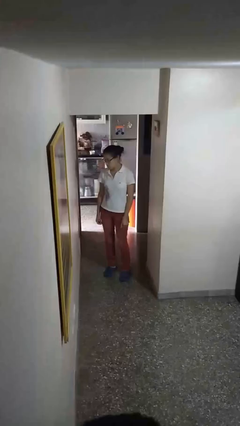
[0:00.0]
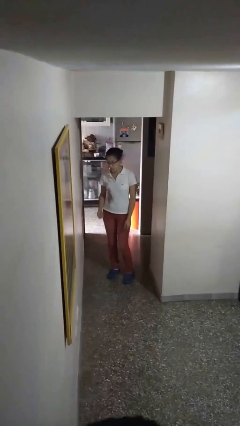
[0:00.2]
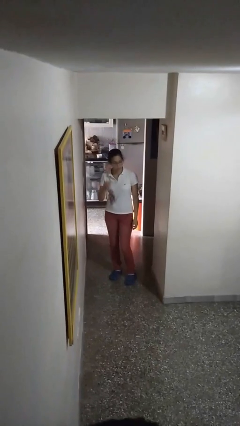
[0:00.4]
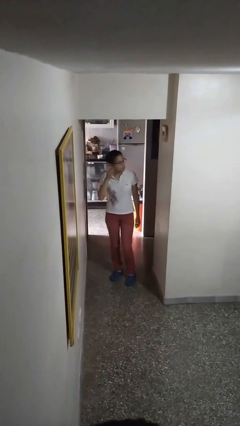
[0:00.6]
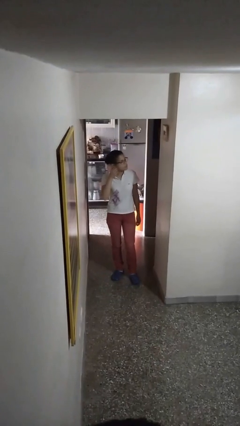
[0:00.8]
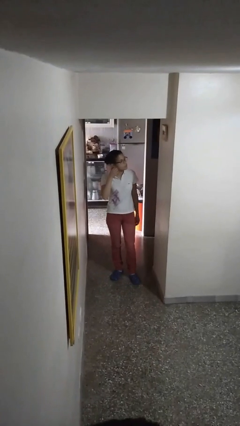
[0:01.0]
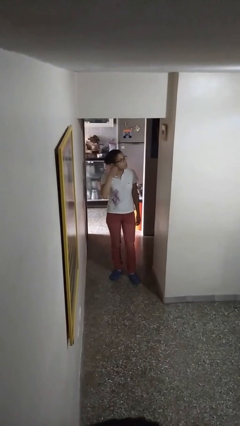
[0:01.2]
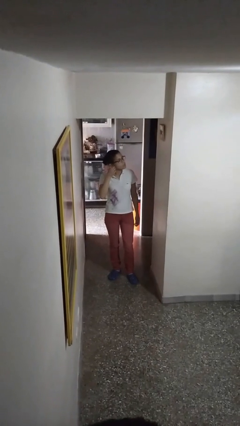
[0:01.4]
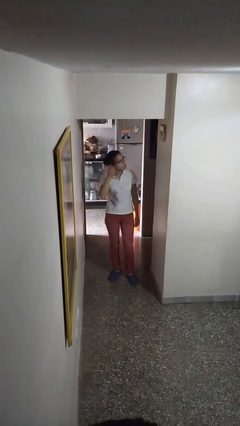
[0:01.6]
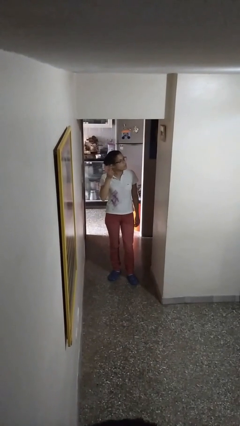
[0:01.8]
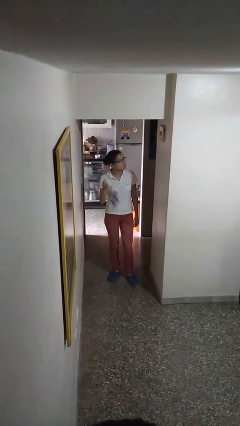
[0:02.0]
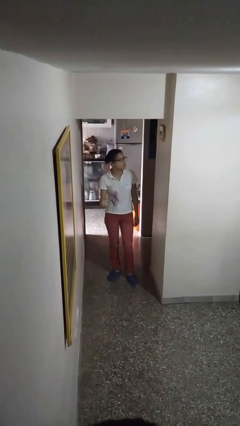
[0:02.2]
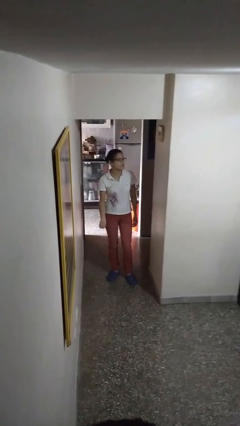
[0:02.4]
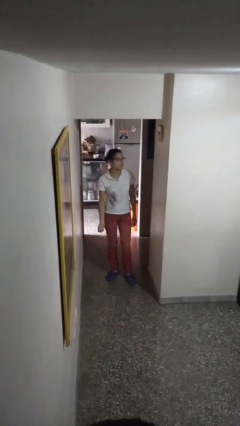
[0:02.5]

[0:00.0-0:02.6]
person takes off earrings

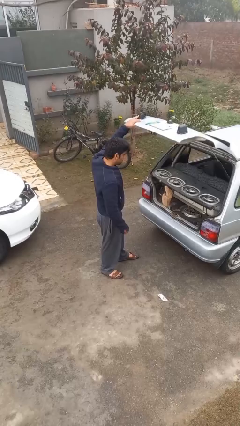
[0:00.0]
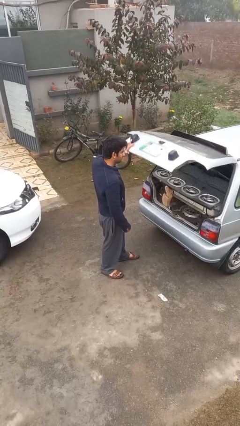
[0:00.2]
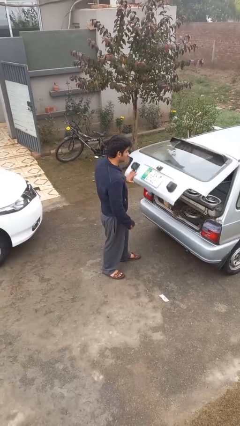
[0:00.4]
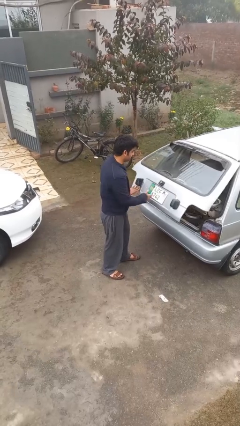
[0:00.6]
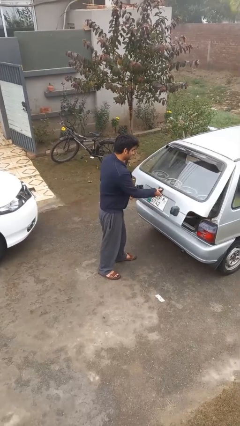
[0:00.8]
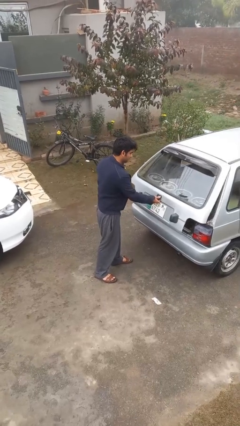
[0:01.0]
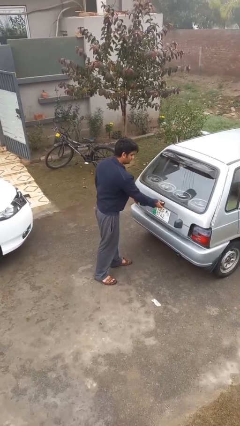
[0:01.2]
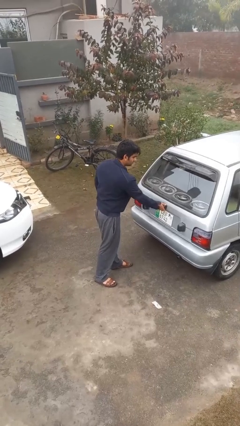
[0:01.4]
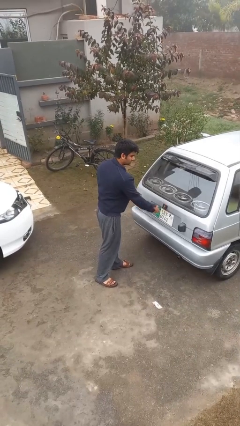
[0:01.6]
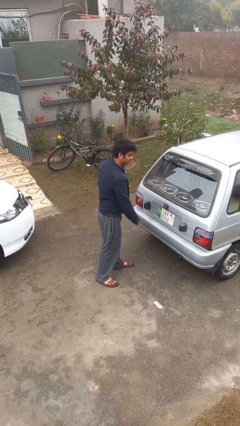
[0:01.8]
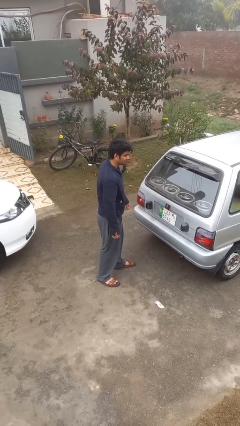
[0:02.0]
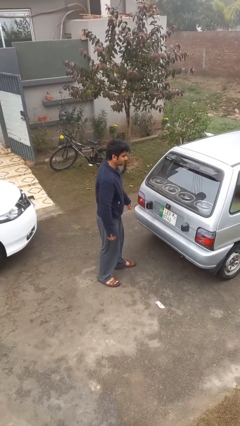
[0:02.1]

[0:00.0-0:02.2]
person closes car trunk

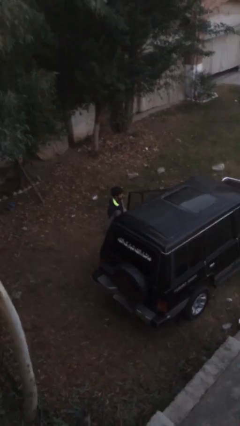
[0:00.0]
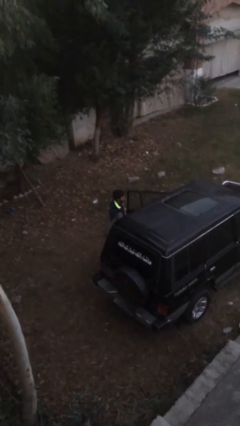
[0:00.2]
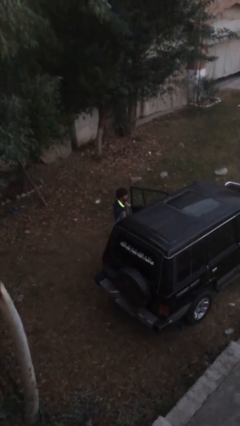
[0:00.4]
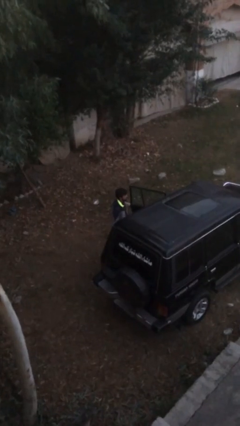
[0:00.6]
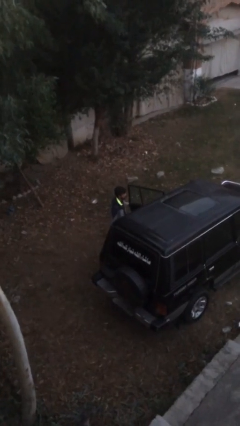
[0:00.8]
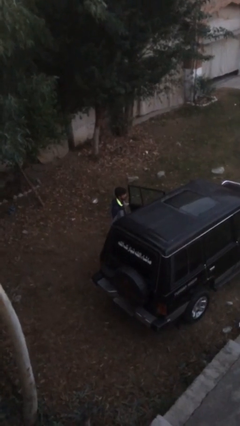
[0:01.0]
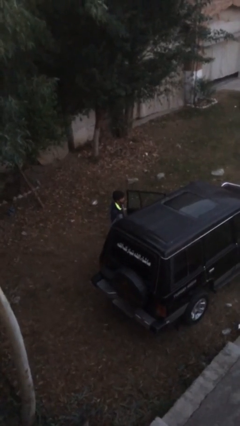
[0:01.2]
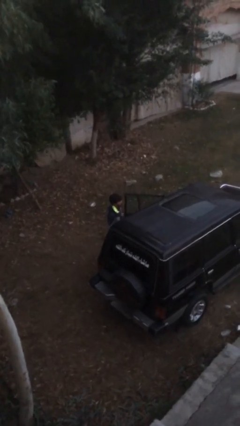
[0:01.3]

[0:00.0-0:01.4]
person opens car door

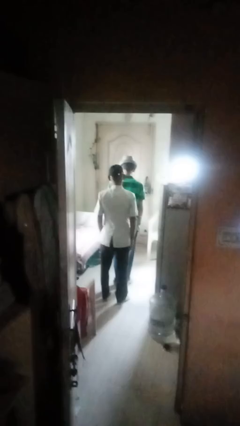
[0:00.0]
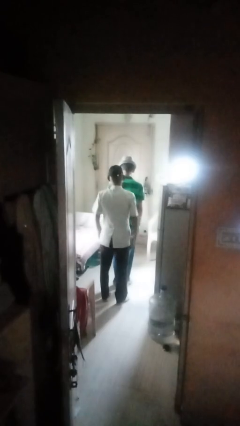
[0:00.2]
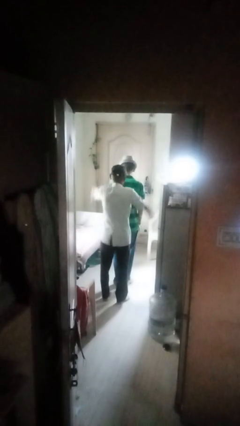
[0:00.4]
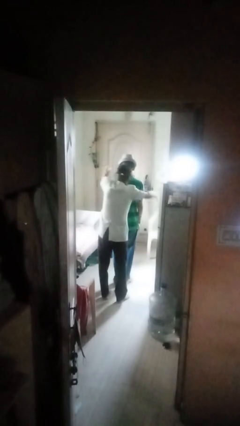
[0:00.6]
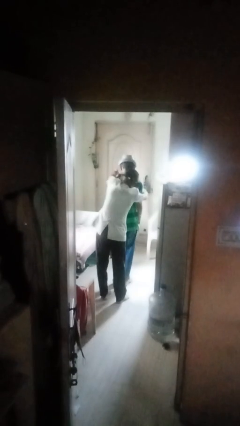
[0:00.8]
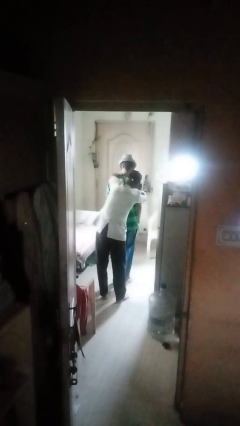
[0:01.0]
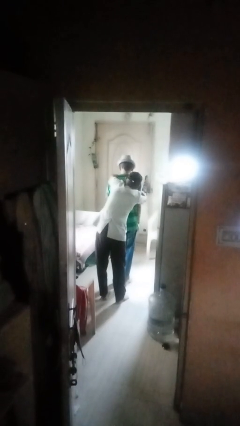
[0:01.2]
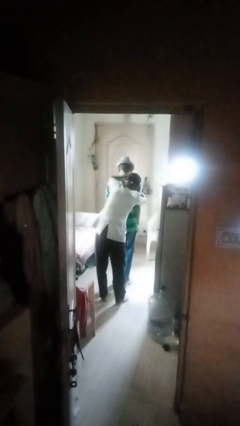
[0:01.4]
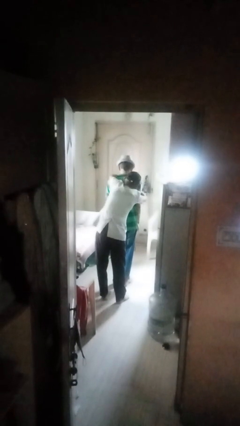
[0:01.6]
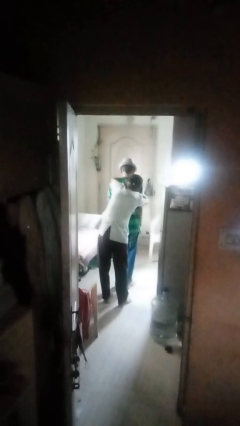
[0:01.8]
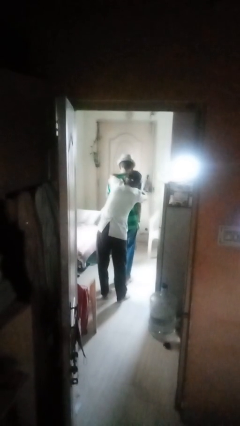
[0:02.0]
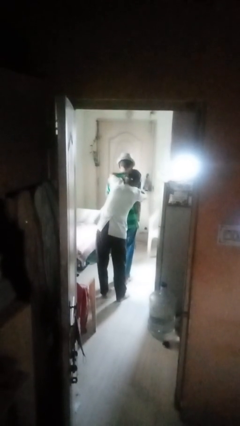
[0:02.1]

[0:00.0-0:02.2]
person hugs person from behind

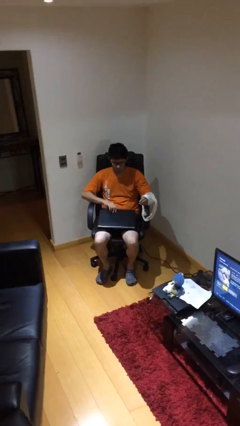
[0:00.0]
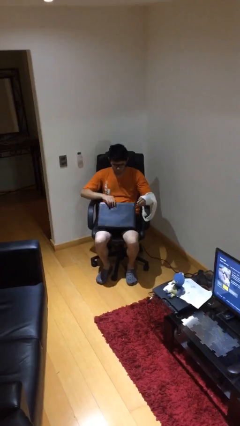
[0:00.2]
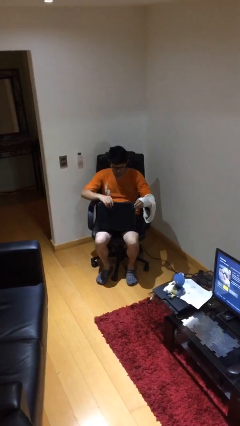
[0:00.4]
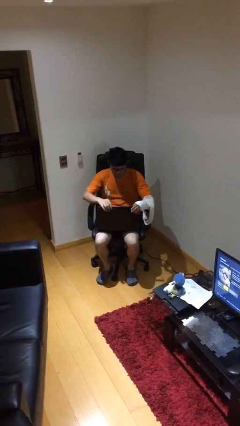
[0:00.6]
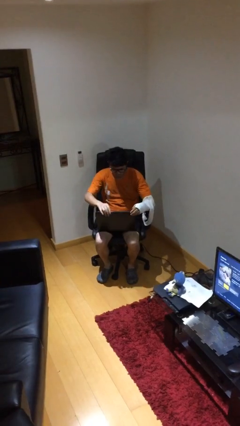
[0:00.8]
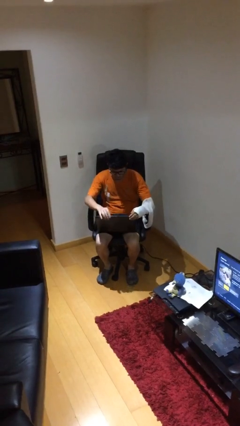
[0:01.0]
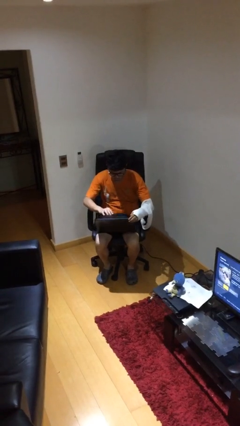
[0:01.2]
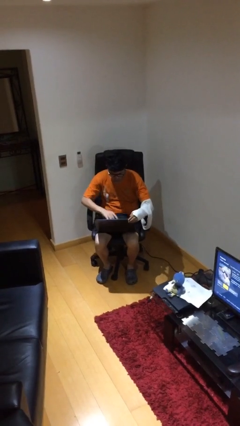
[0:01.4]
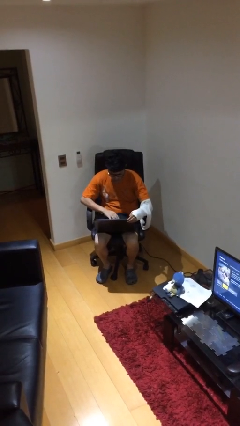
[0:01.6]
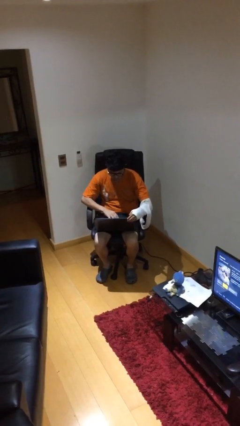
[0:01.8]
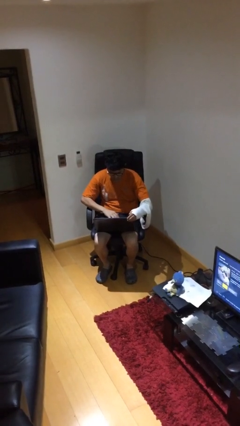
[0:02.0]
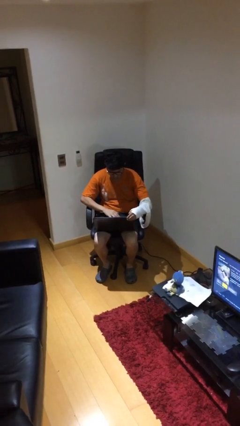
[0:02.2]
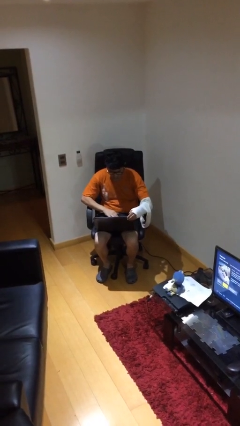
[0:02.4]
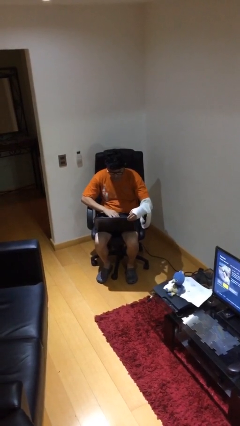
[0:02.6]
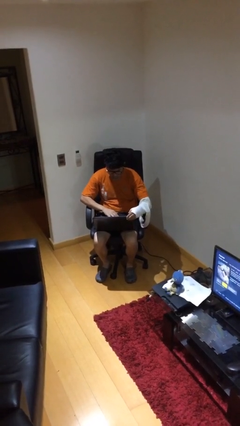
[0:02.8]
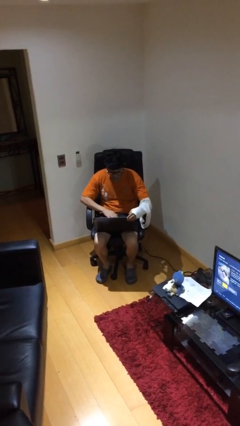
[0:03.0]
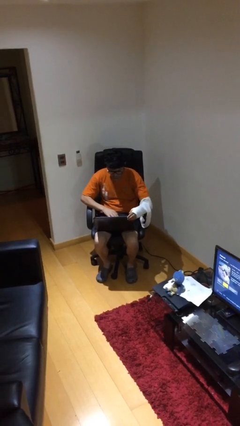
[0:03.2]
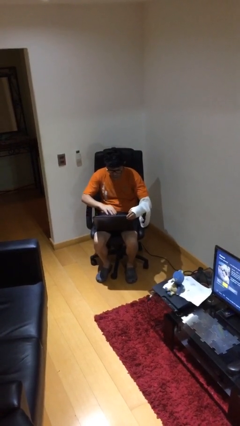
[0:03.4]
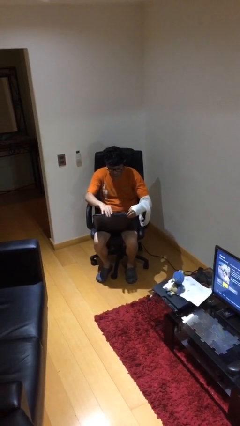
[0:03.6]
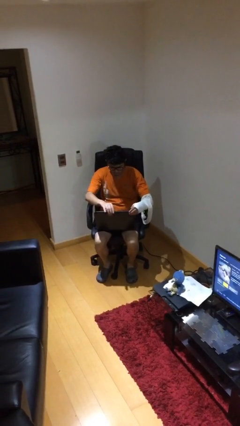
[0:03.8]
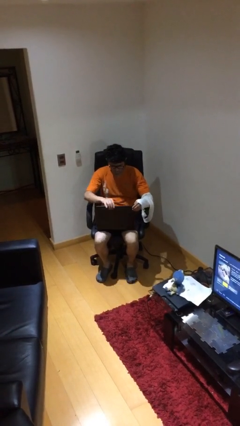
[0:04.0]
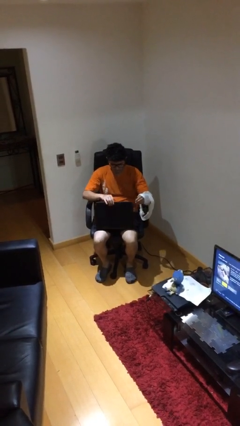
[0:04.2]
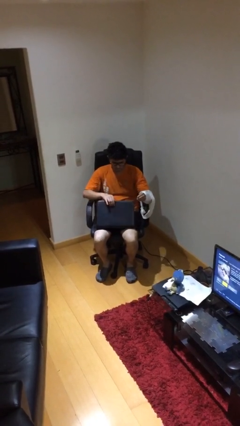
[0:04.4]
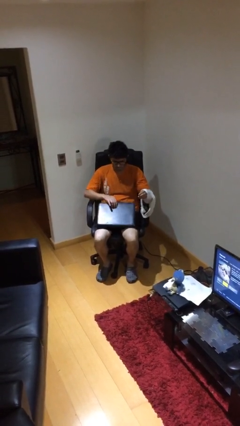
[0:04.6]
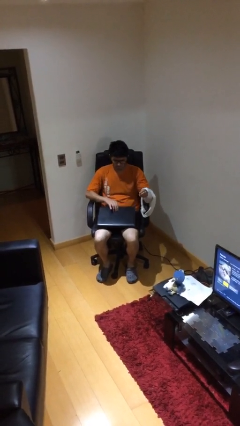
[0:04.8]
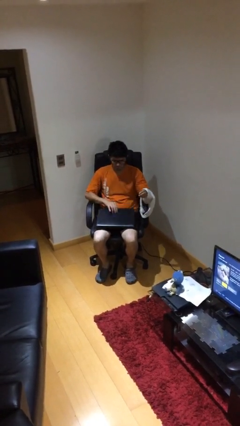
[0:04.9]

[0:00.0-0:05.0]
person interacts with laptop

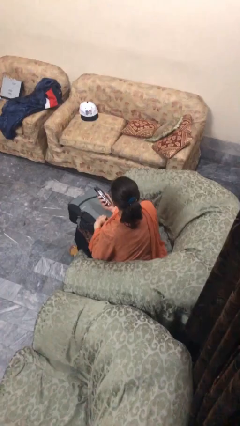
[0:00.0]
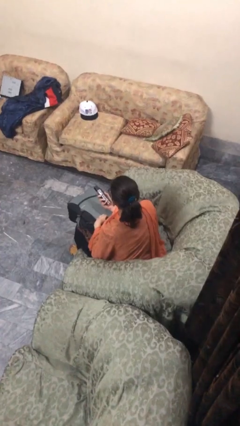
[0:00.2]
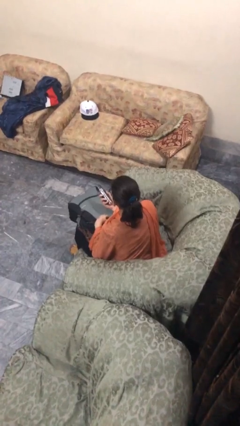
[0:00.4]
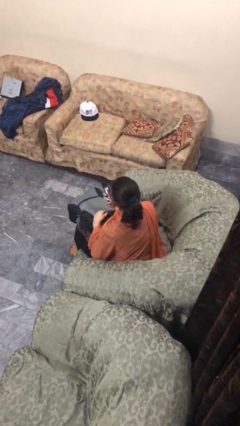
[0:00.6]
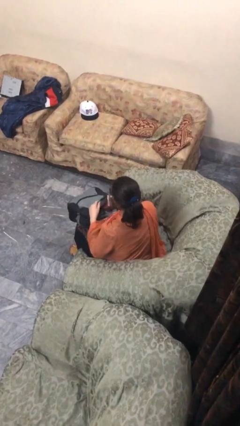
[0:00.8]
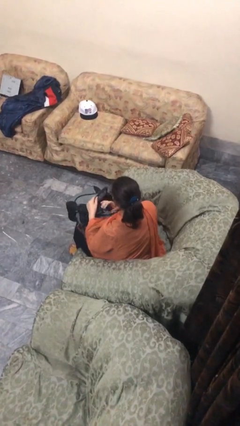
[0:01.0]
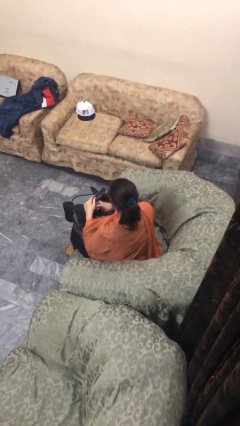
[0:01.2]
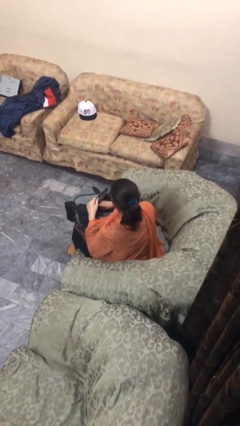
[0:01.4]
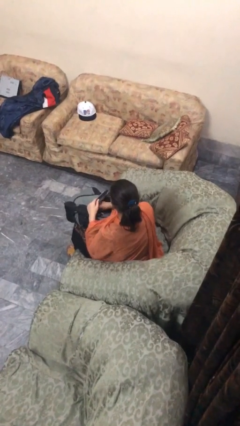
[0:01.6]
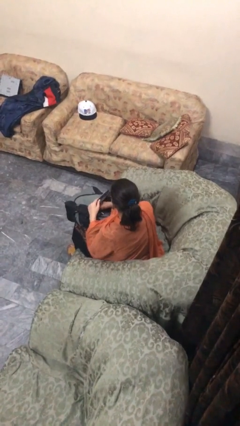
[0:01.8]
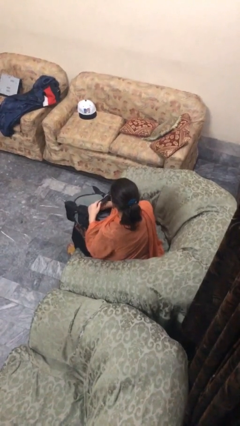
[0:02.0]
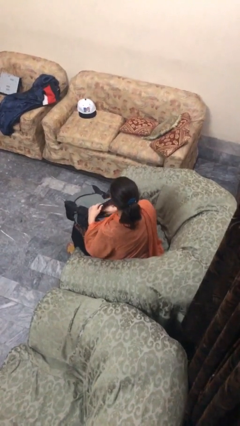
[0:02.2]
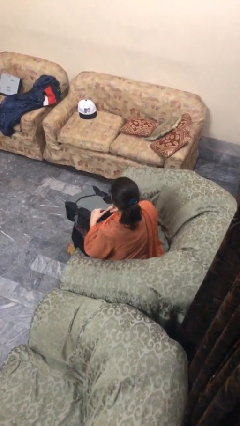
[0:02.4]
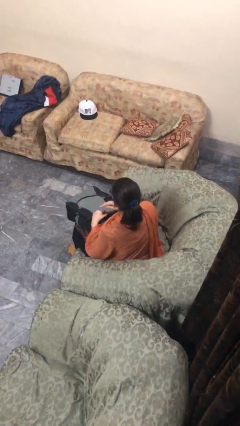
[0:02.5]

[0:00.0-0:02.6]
person puts object into backpack

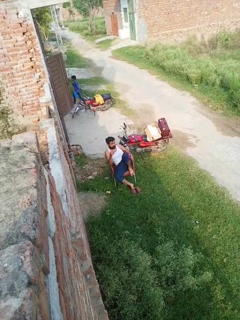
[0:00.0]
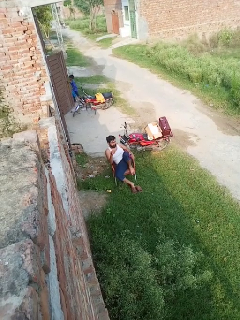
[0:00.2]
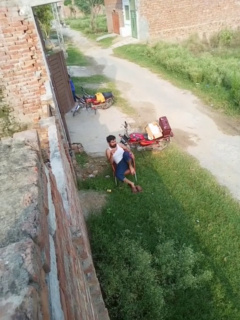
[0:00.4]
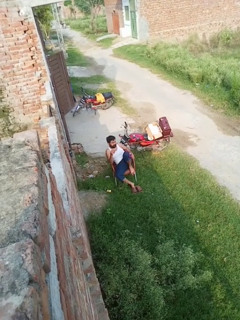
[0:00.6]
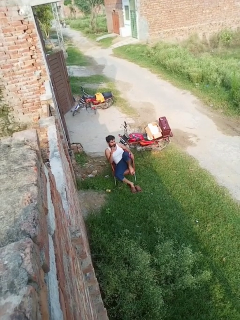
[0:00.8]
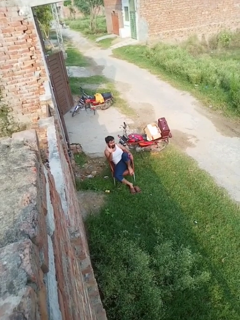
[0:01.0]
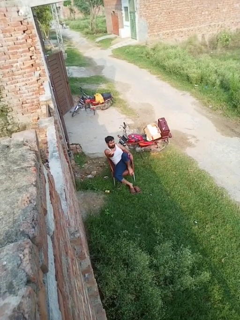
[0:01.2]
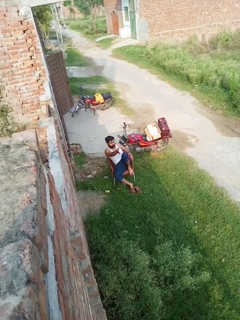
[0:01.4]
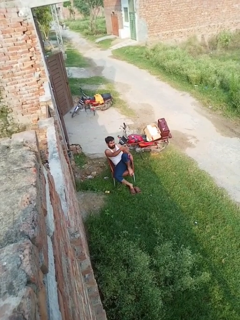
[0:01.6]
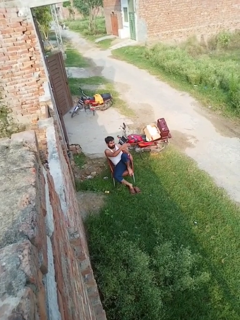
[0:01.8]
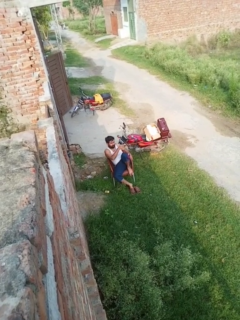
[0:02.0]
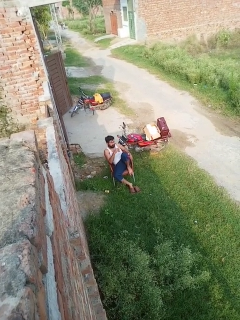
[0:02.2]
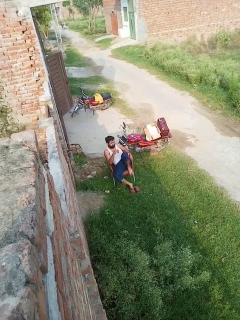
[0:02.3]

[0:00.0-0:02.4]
person gestures swipe left
